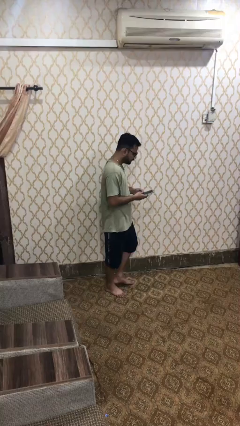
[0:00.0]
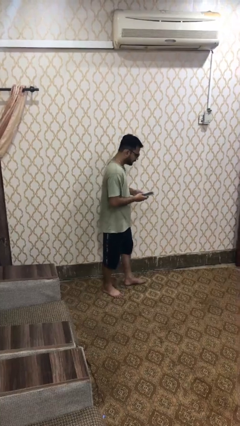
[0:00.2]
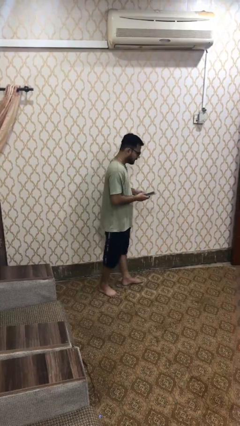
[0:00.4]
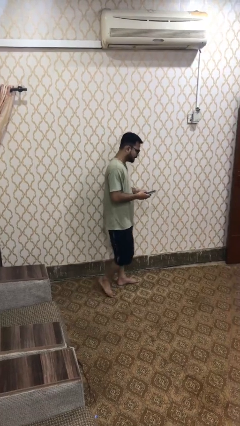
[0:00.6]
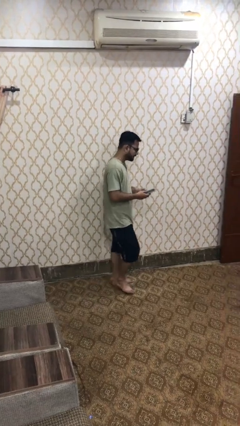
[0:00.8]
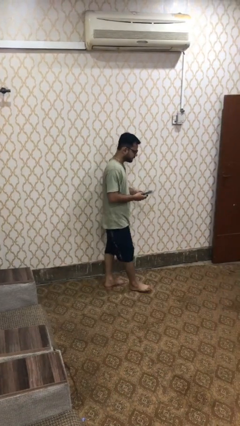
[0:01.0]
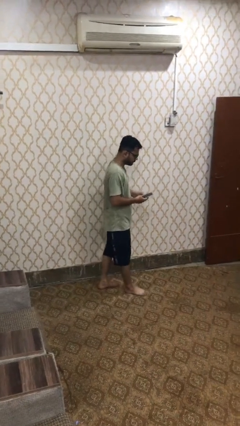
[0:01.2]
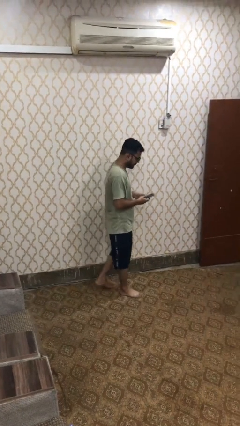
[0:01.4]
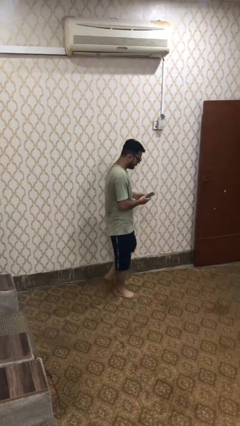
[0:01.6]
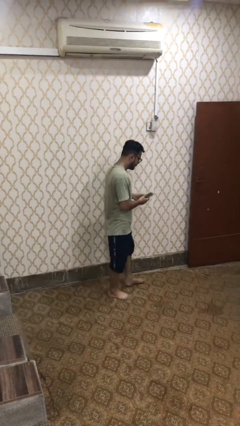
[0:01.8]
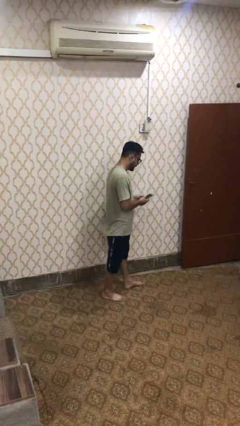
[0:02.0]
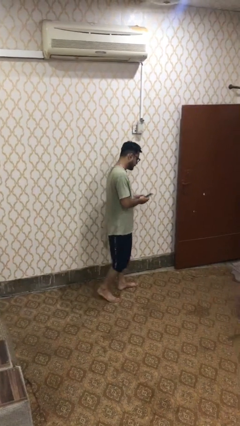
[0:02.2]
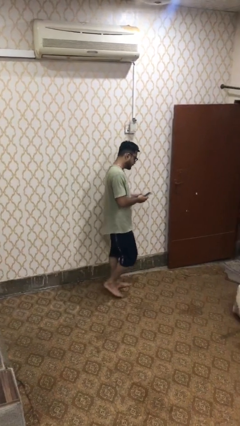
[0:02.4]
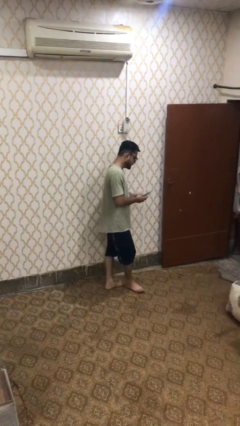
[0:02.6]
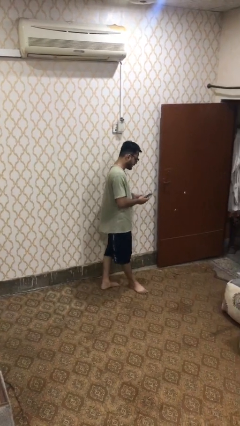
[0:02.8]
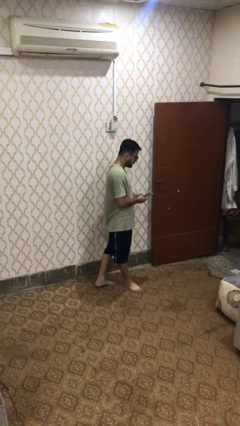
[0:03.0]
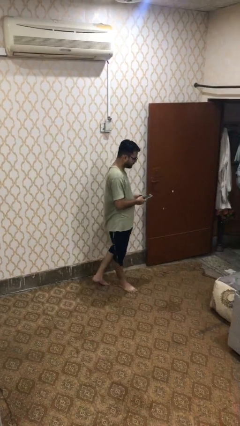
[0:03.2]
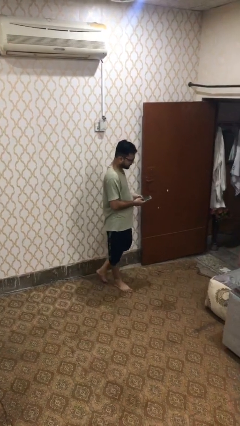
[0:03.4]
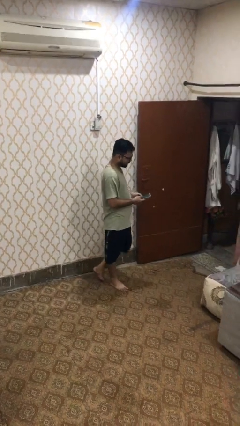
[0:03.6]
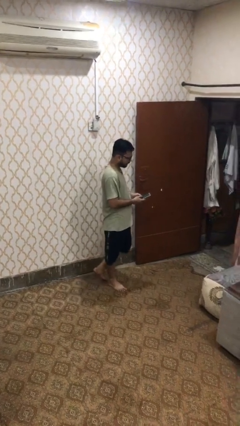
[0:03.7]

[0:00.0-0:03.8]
person texts on phone

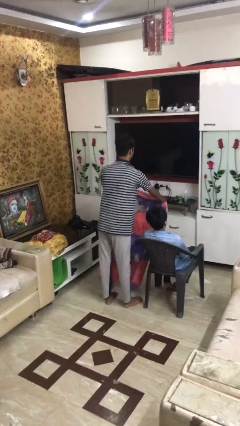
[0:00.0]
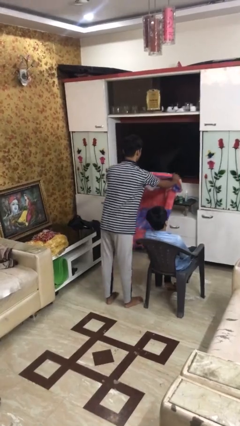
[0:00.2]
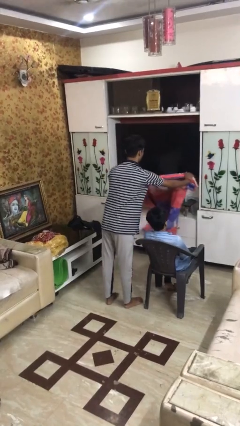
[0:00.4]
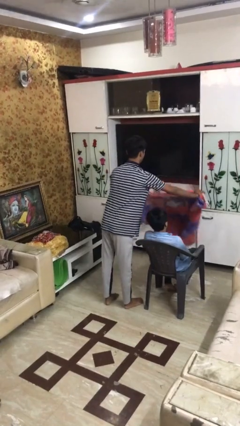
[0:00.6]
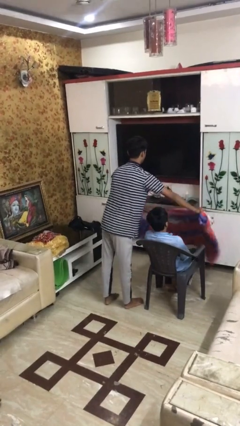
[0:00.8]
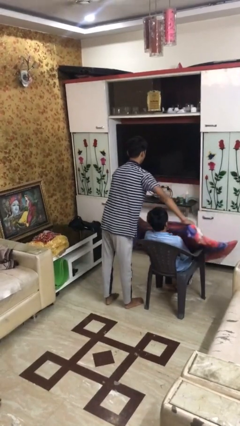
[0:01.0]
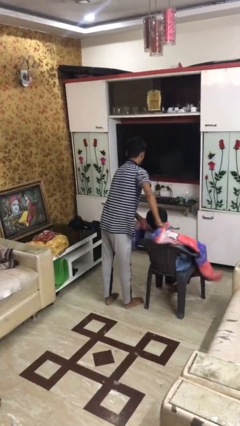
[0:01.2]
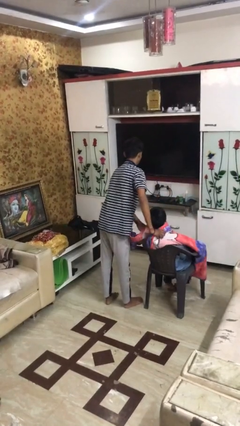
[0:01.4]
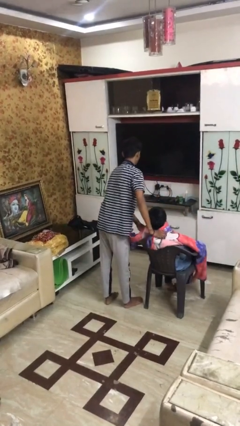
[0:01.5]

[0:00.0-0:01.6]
person covers friend with blanket

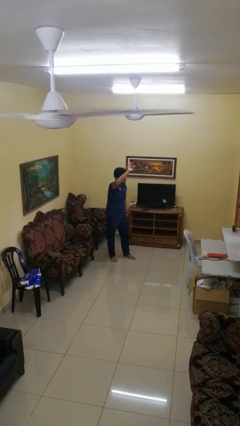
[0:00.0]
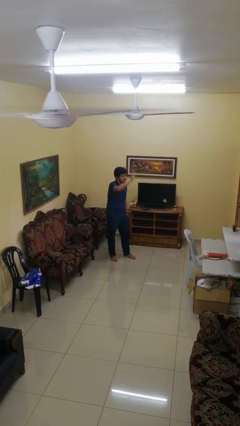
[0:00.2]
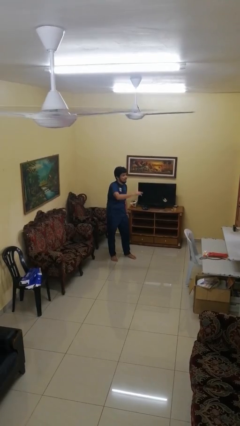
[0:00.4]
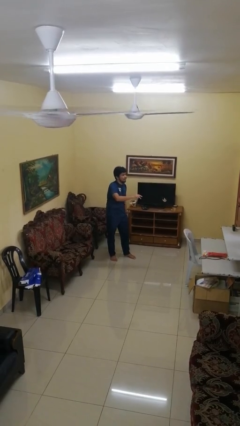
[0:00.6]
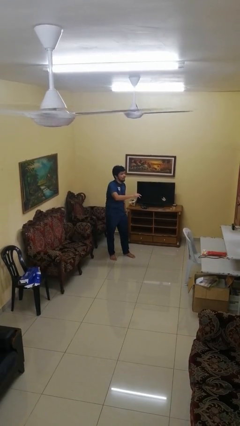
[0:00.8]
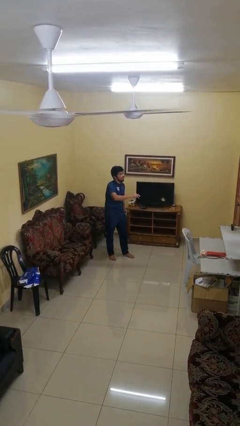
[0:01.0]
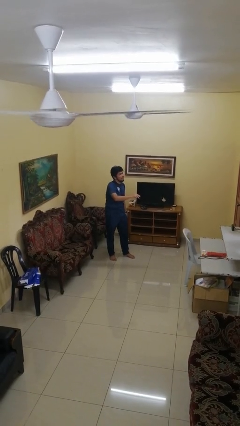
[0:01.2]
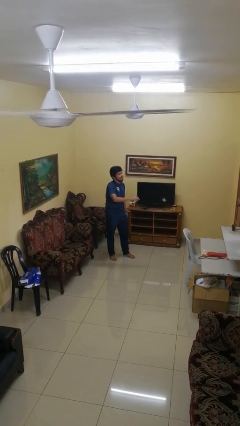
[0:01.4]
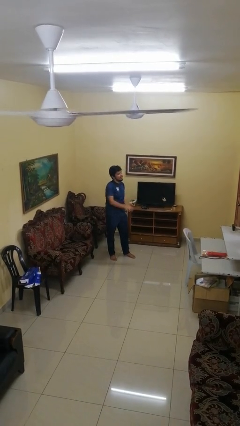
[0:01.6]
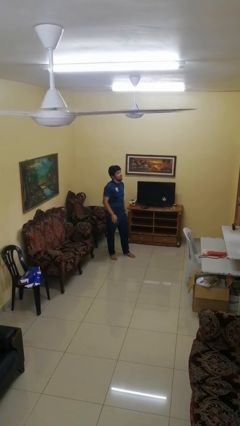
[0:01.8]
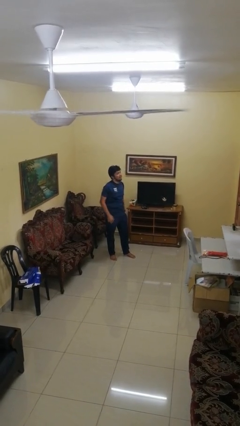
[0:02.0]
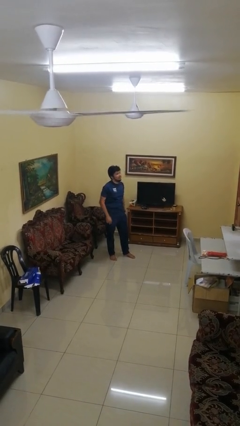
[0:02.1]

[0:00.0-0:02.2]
person gestures swipe down

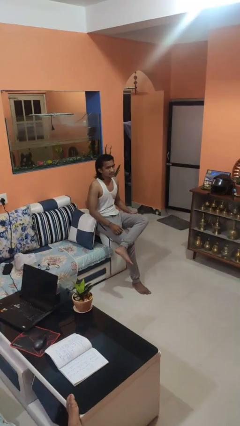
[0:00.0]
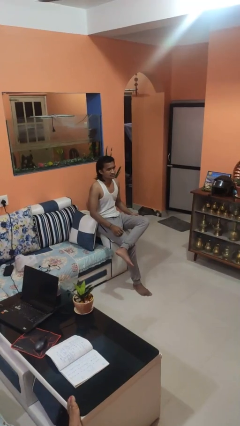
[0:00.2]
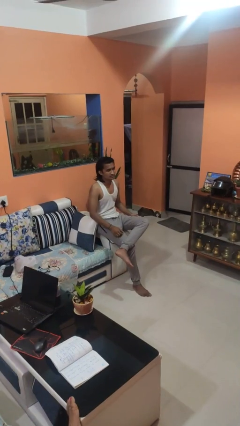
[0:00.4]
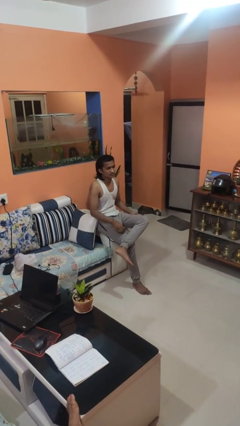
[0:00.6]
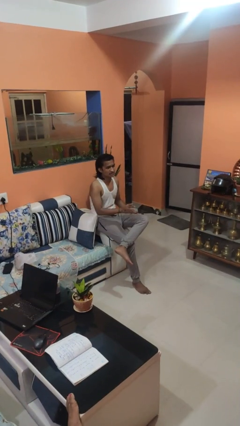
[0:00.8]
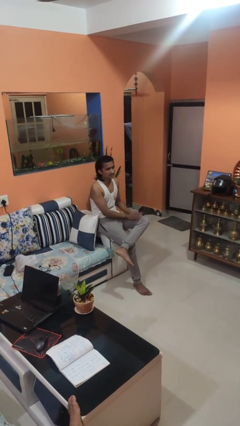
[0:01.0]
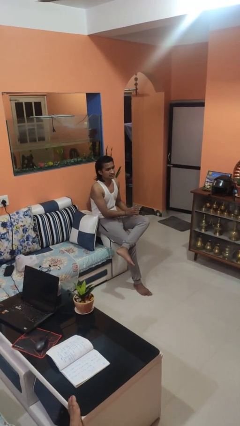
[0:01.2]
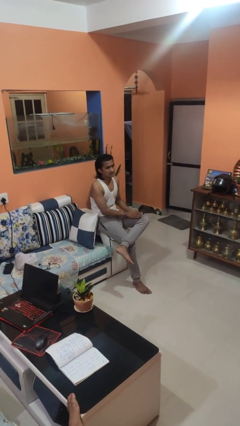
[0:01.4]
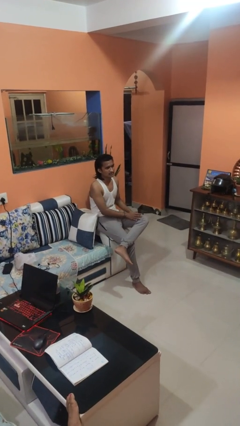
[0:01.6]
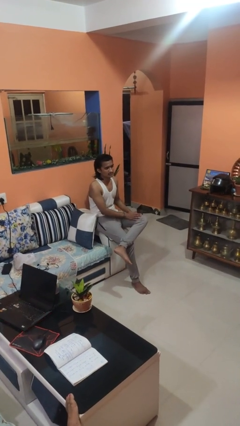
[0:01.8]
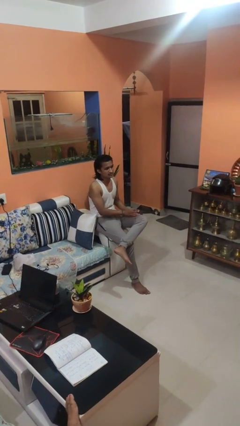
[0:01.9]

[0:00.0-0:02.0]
person slaps hands on thighs

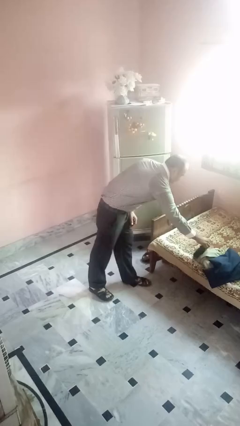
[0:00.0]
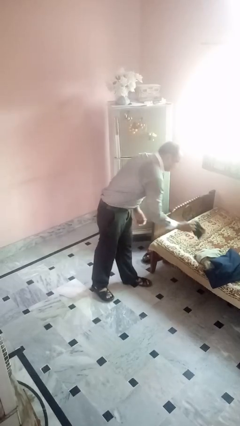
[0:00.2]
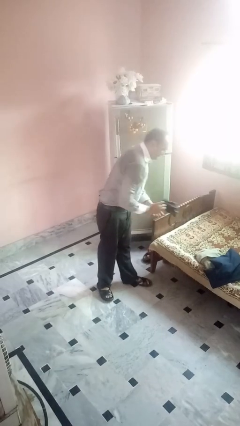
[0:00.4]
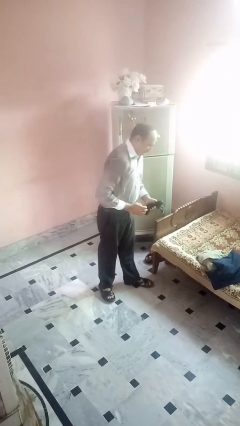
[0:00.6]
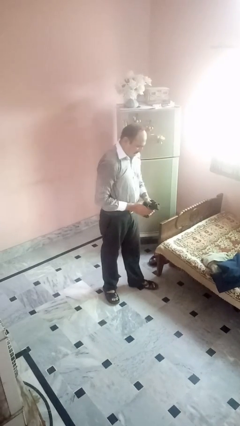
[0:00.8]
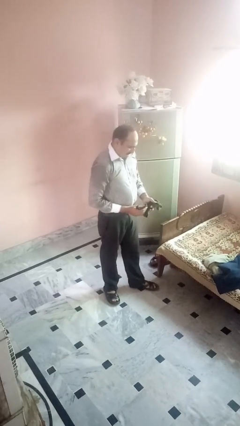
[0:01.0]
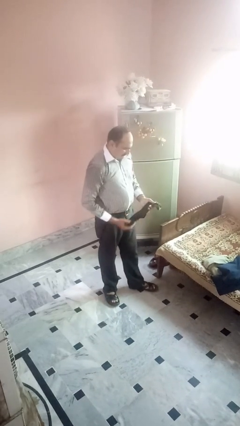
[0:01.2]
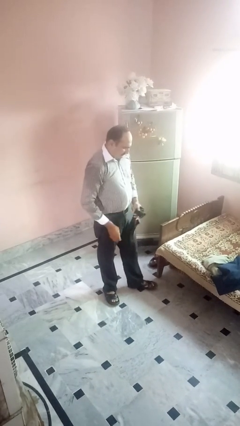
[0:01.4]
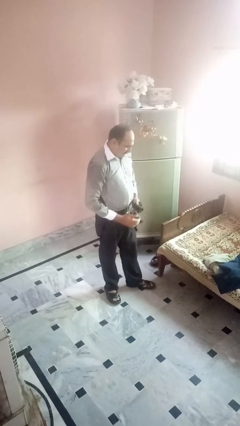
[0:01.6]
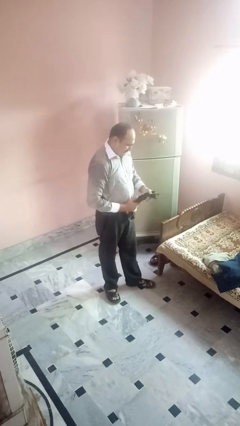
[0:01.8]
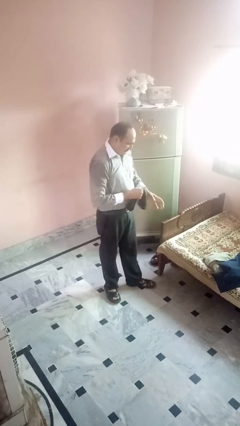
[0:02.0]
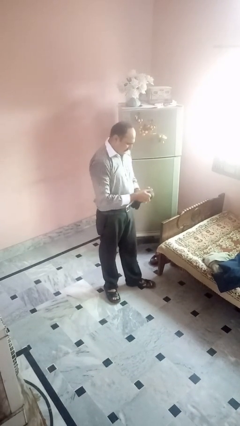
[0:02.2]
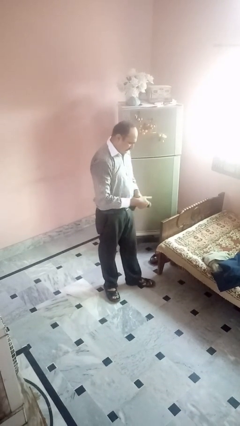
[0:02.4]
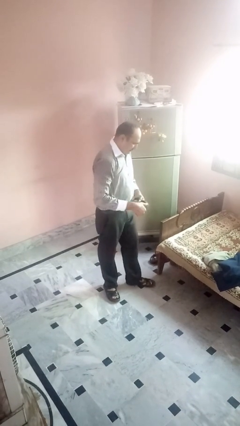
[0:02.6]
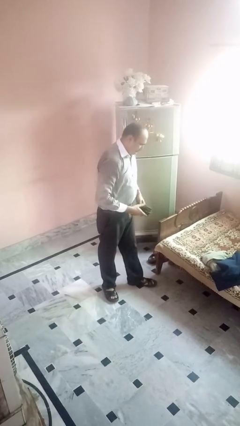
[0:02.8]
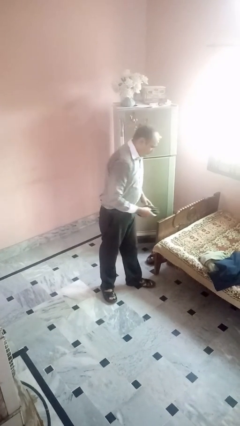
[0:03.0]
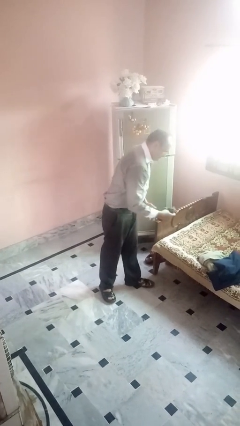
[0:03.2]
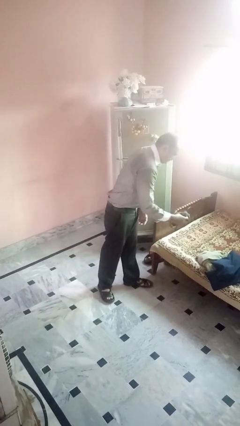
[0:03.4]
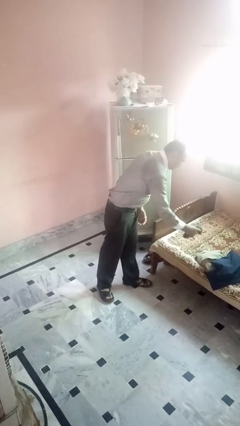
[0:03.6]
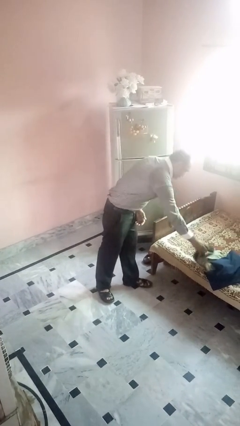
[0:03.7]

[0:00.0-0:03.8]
person folds socks

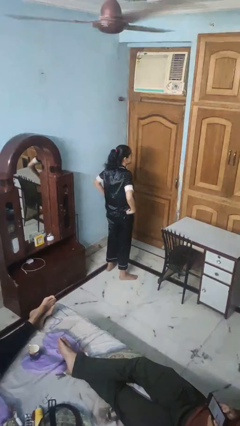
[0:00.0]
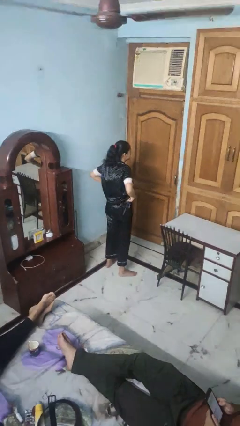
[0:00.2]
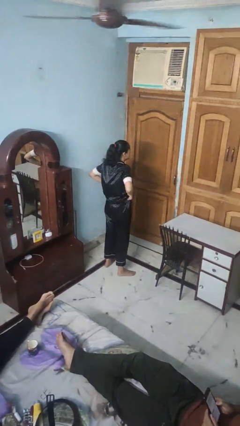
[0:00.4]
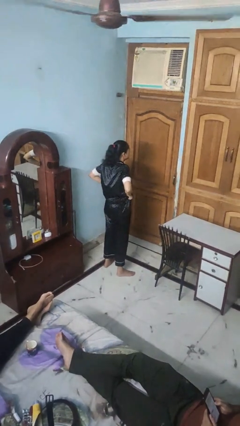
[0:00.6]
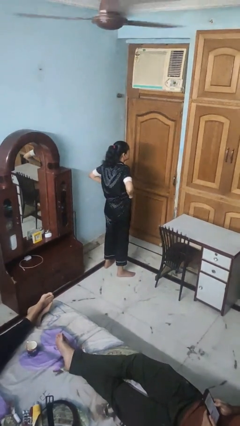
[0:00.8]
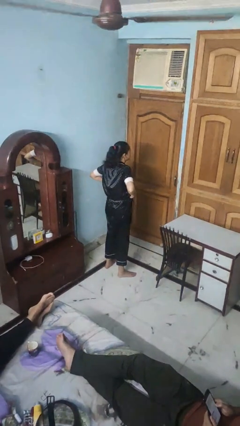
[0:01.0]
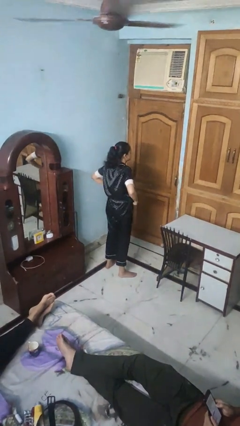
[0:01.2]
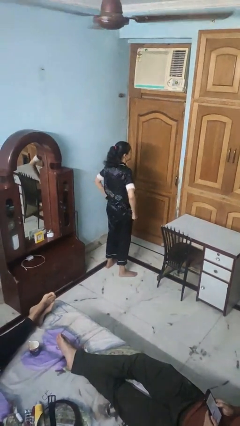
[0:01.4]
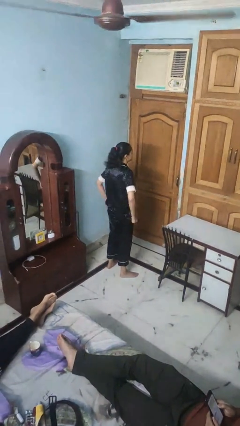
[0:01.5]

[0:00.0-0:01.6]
person hikes up pants

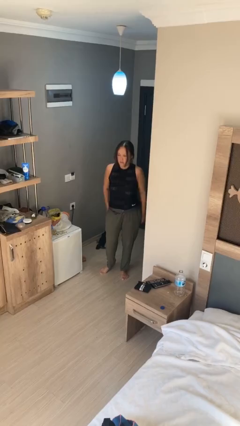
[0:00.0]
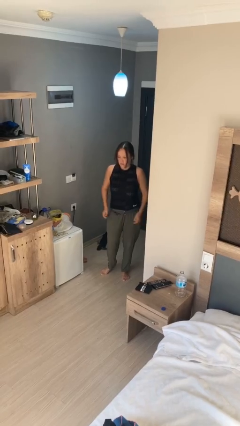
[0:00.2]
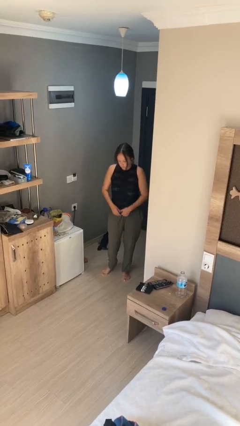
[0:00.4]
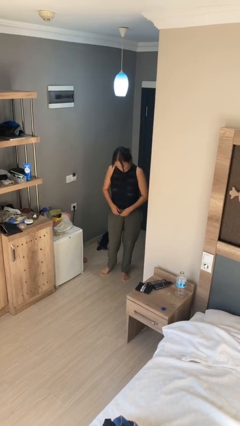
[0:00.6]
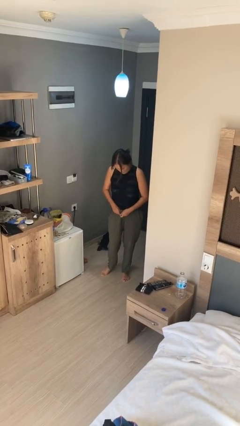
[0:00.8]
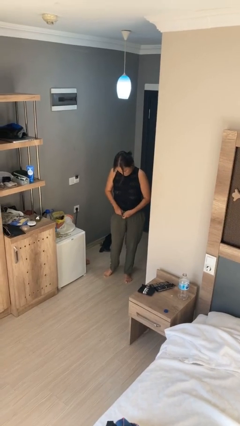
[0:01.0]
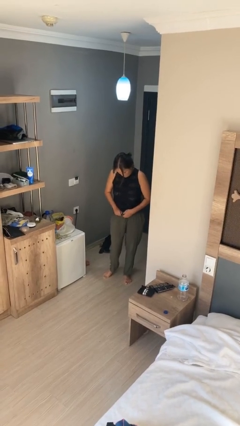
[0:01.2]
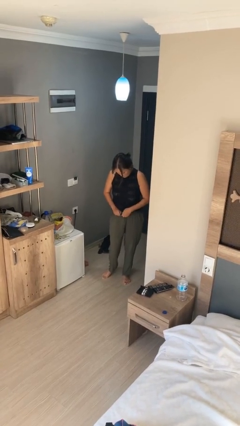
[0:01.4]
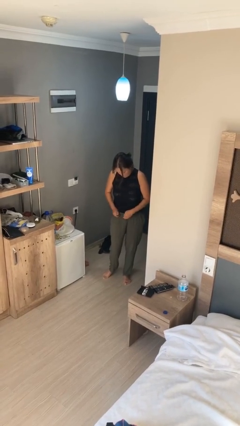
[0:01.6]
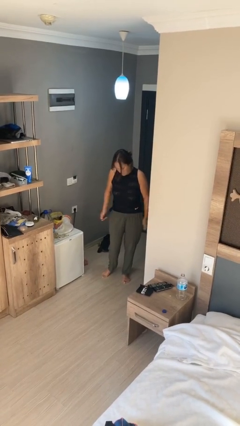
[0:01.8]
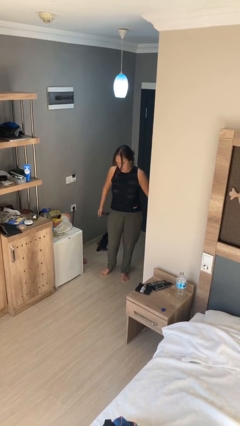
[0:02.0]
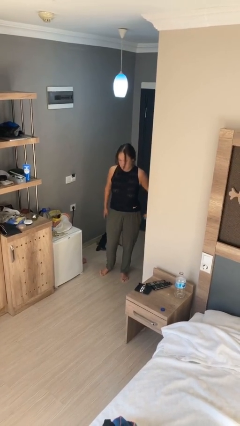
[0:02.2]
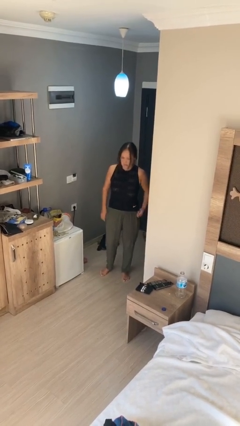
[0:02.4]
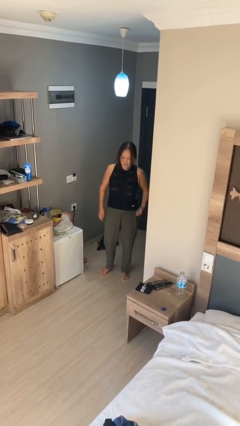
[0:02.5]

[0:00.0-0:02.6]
person takes off belt
